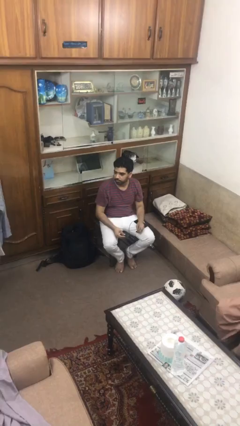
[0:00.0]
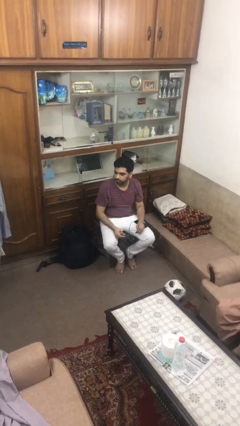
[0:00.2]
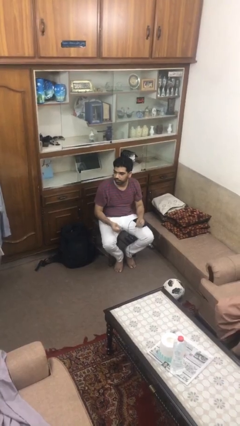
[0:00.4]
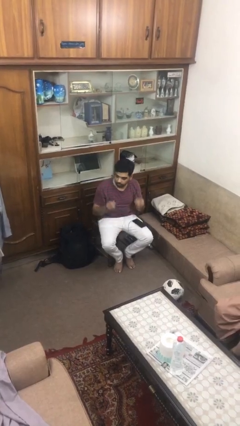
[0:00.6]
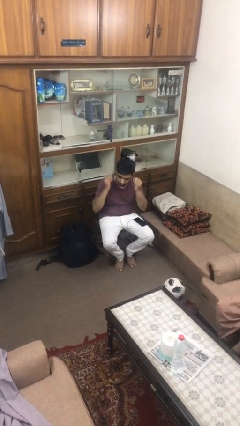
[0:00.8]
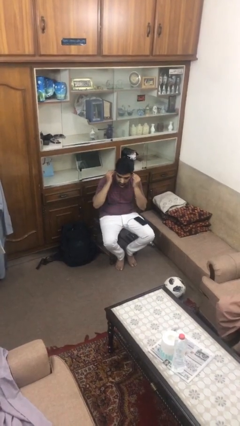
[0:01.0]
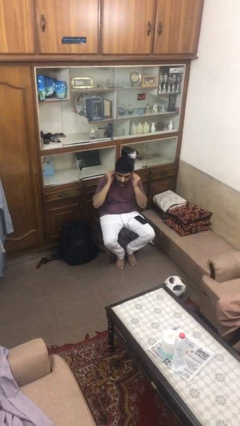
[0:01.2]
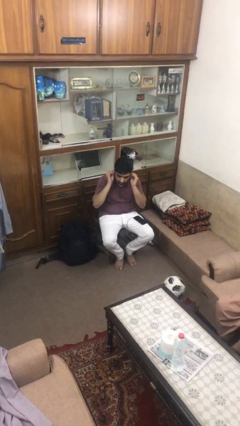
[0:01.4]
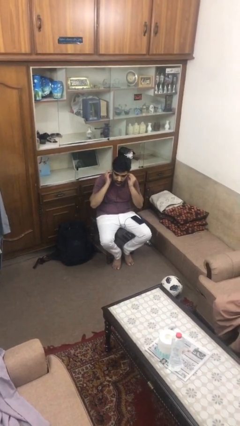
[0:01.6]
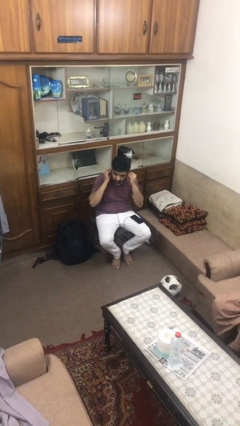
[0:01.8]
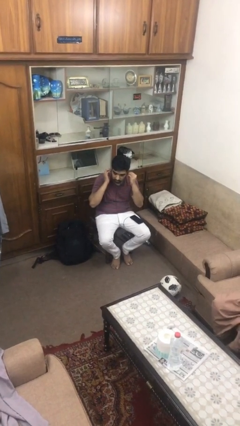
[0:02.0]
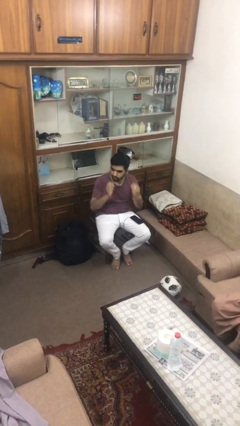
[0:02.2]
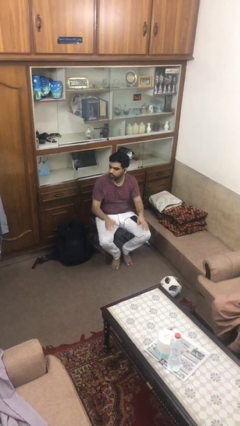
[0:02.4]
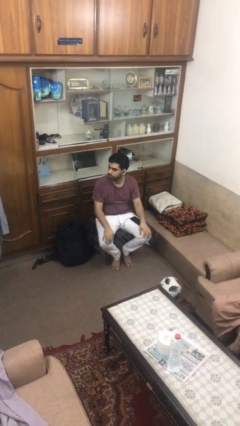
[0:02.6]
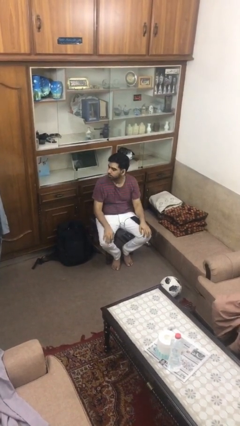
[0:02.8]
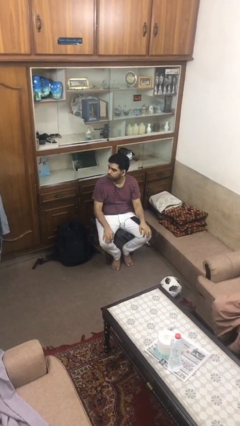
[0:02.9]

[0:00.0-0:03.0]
person puts on headphones

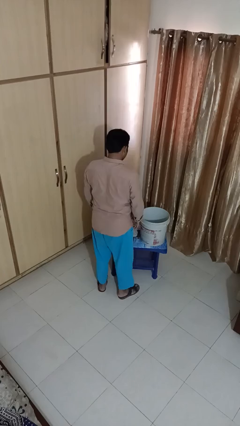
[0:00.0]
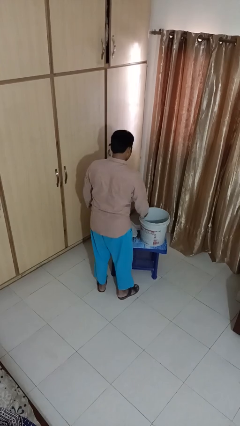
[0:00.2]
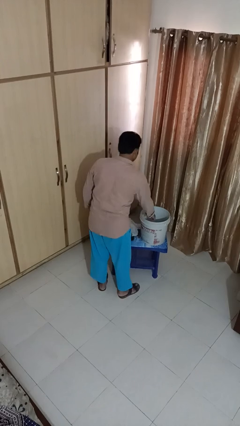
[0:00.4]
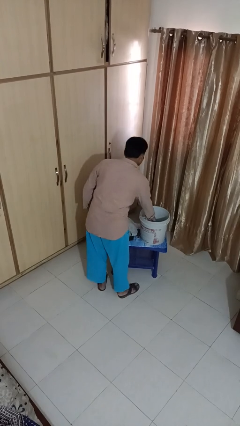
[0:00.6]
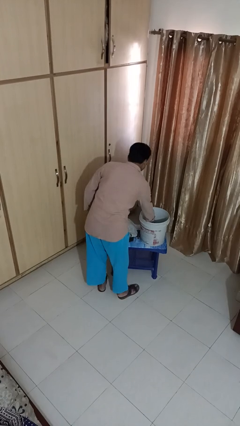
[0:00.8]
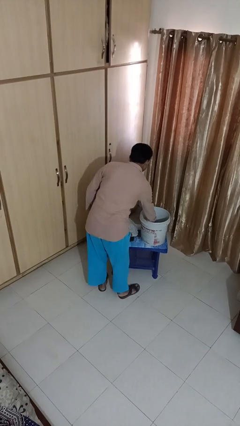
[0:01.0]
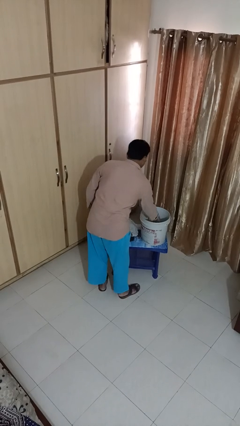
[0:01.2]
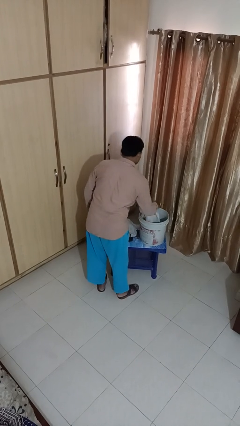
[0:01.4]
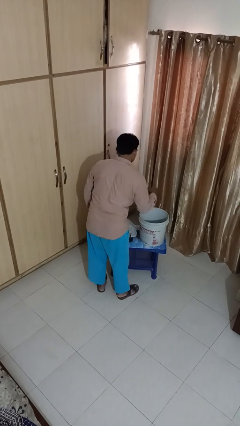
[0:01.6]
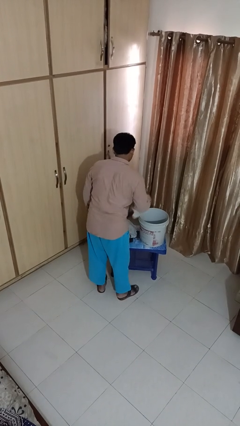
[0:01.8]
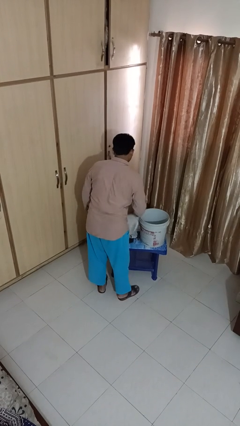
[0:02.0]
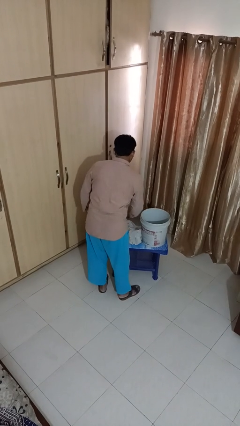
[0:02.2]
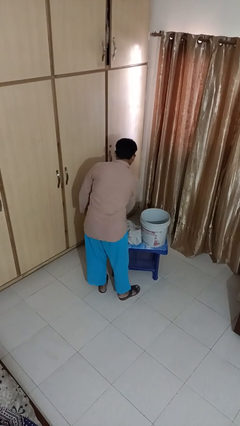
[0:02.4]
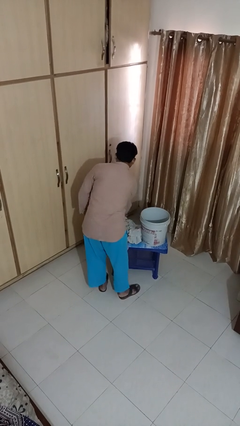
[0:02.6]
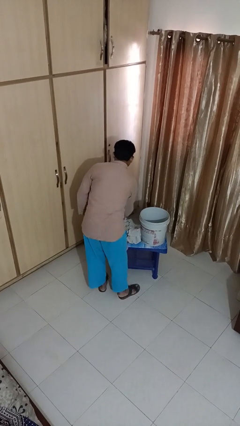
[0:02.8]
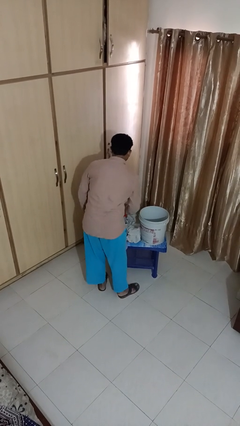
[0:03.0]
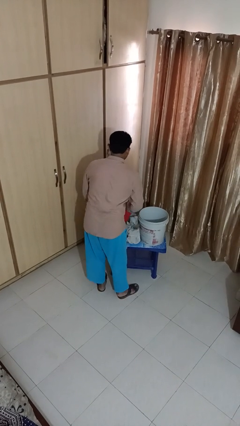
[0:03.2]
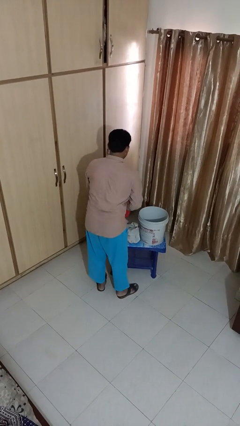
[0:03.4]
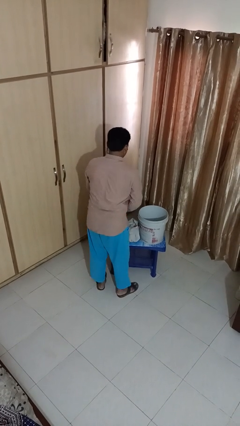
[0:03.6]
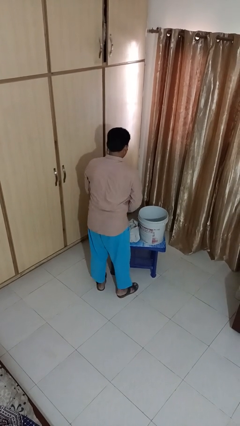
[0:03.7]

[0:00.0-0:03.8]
person takes object from basket

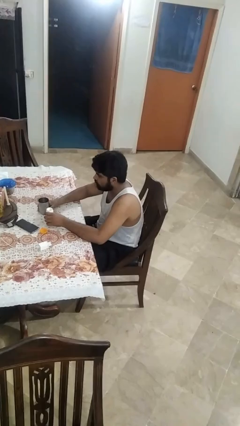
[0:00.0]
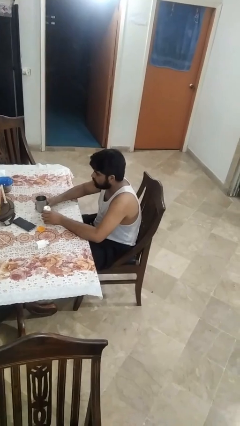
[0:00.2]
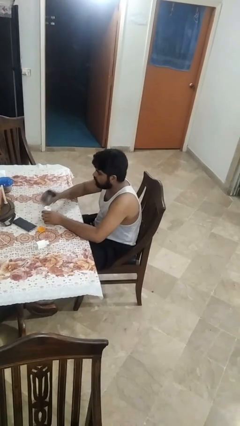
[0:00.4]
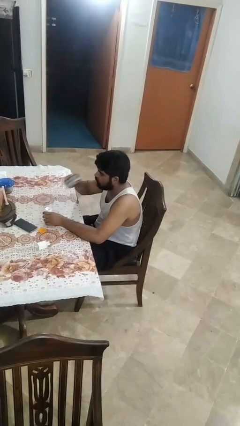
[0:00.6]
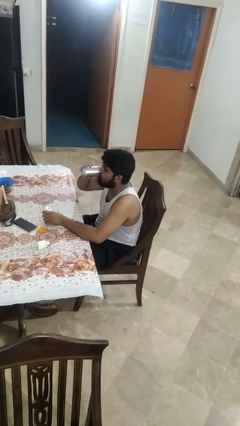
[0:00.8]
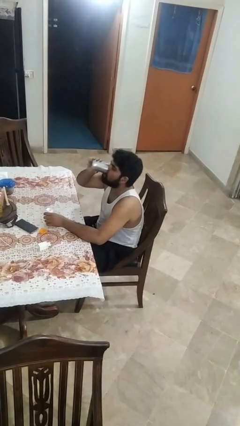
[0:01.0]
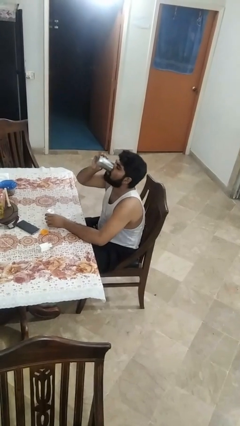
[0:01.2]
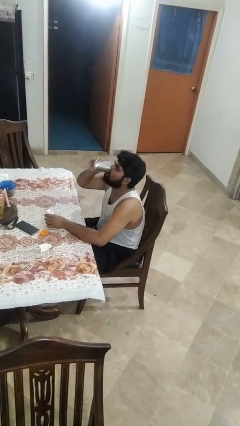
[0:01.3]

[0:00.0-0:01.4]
person drinks from cup

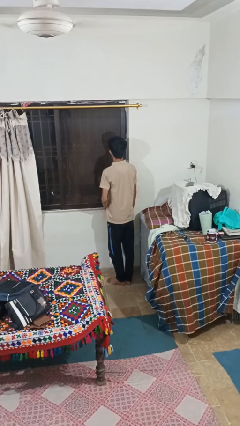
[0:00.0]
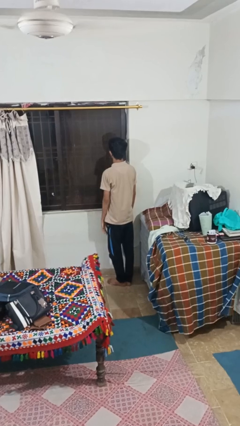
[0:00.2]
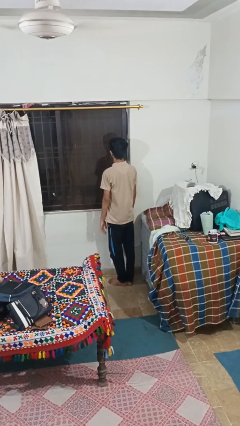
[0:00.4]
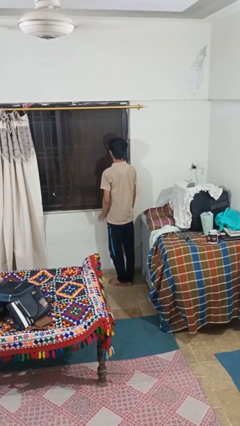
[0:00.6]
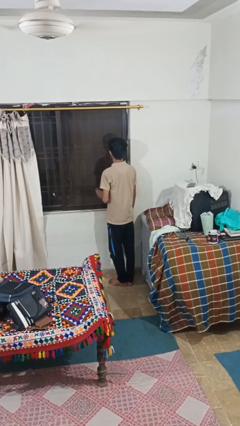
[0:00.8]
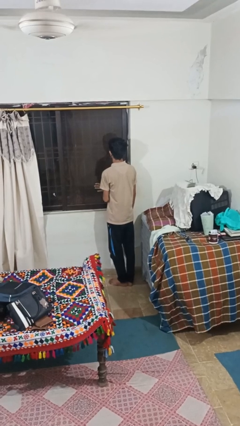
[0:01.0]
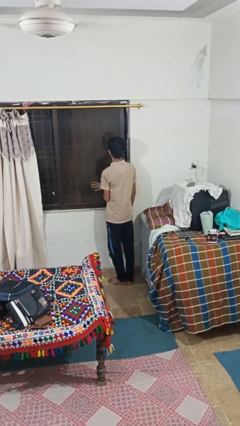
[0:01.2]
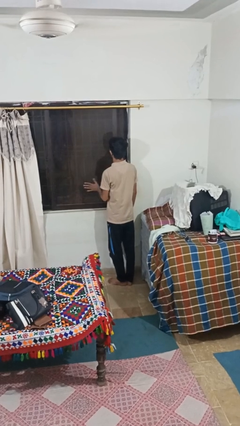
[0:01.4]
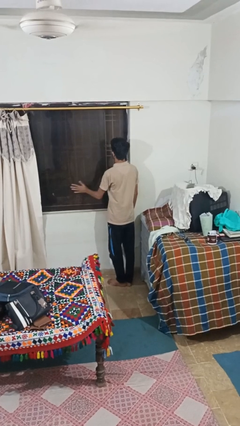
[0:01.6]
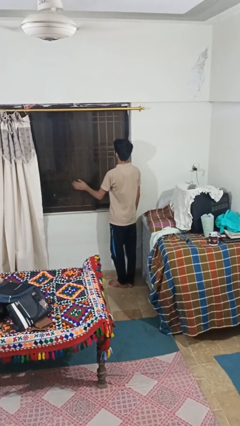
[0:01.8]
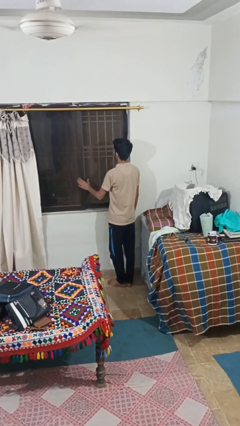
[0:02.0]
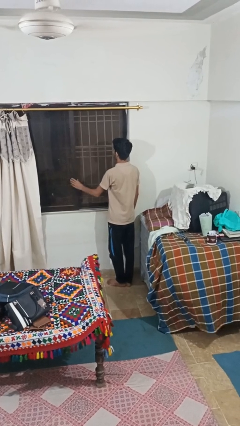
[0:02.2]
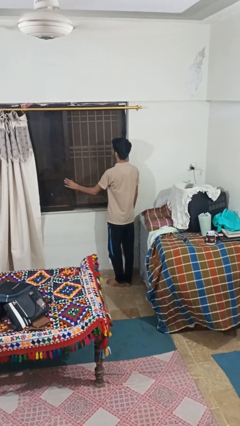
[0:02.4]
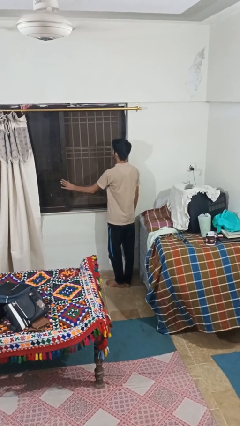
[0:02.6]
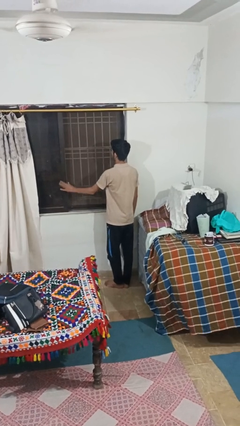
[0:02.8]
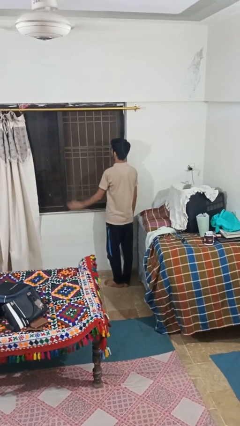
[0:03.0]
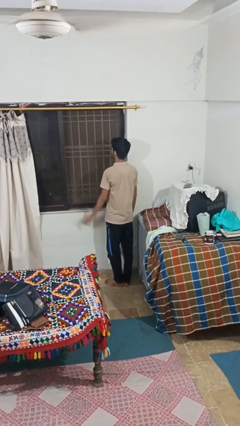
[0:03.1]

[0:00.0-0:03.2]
person opens sliding door

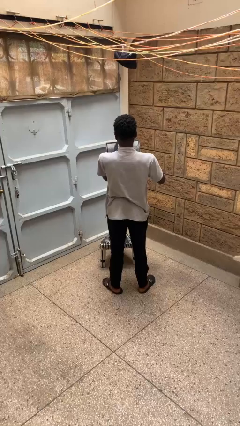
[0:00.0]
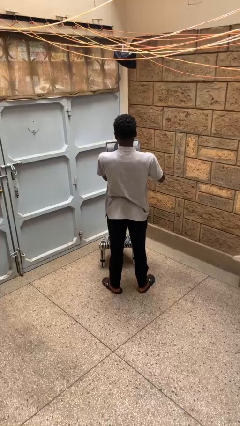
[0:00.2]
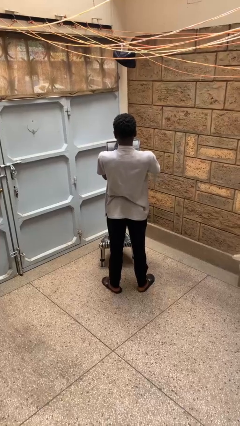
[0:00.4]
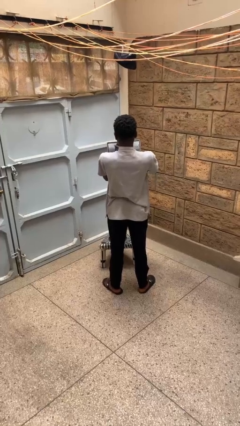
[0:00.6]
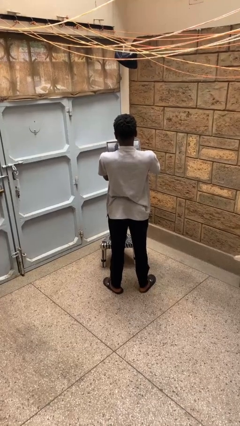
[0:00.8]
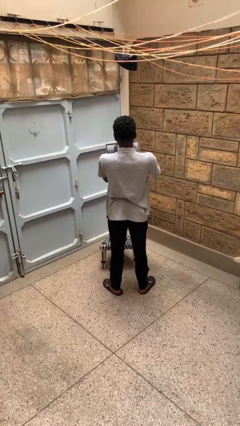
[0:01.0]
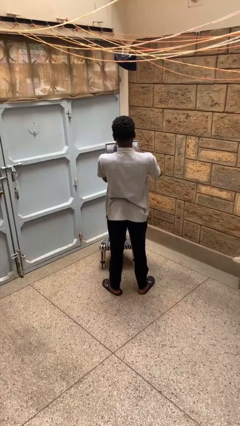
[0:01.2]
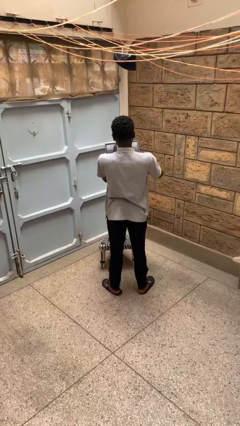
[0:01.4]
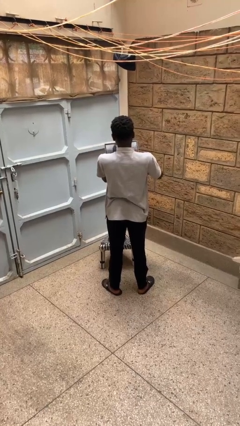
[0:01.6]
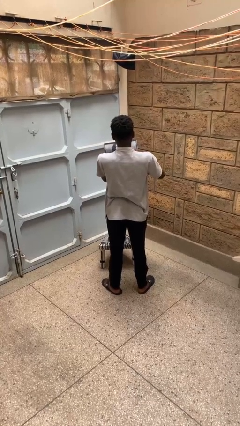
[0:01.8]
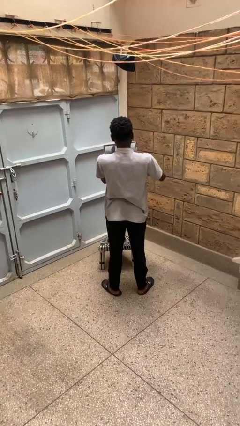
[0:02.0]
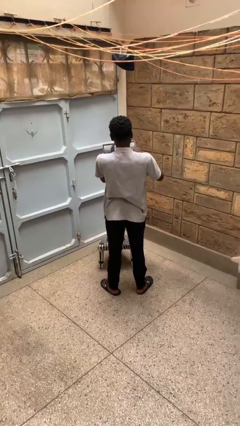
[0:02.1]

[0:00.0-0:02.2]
person interacts with tablet

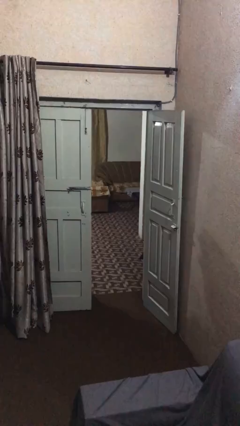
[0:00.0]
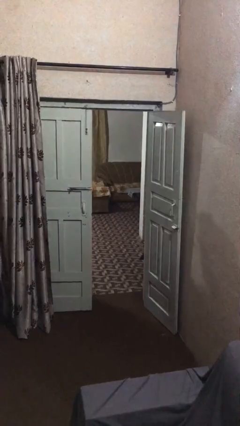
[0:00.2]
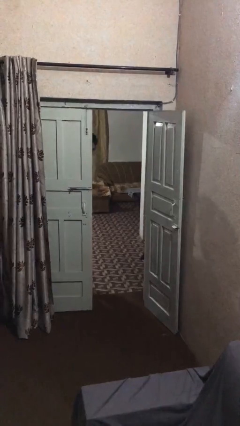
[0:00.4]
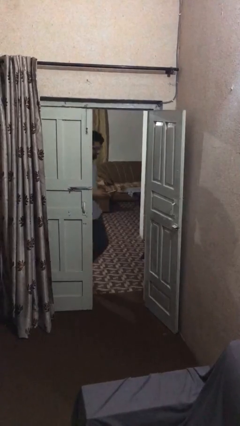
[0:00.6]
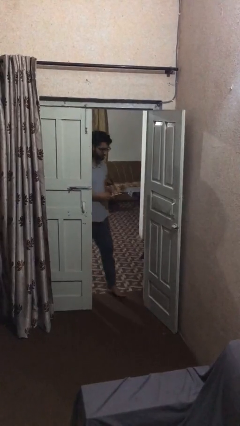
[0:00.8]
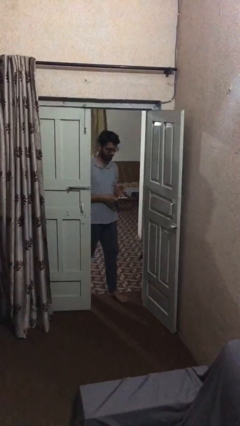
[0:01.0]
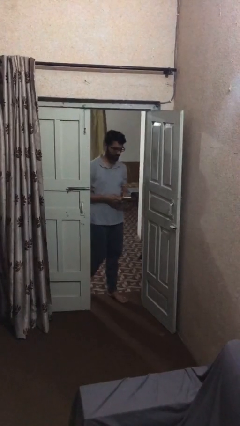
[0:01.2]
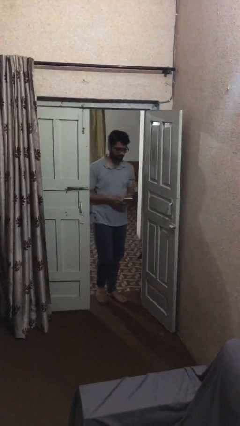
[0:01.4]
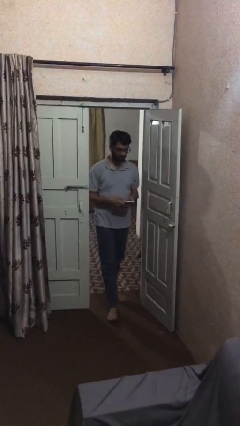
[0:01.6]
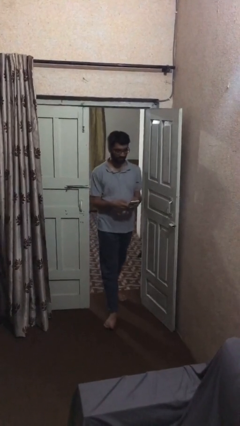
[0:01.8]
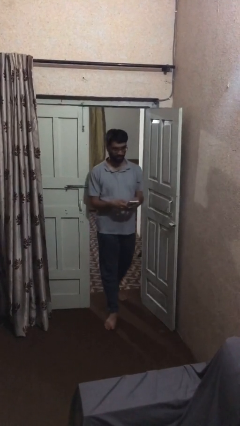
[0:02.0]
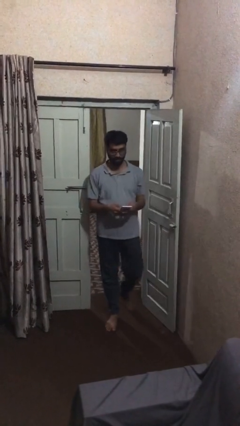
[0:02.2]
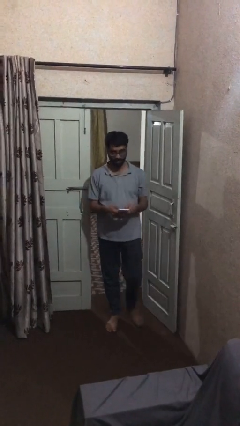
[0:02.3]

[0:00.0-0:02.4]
person enters scene through structure

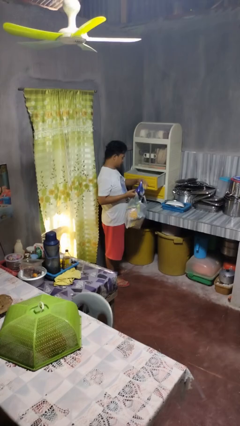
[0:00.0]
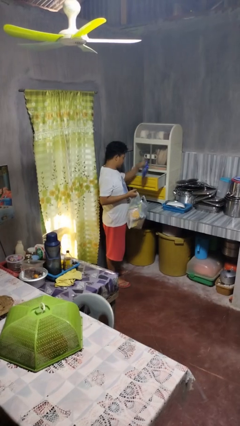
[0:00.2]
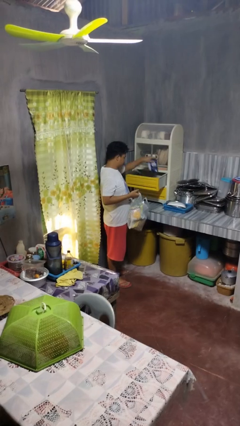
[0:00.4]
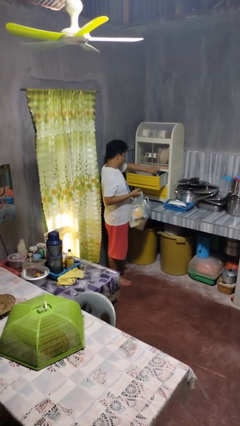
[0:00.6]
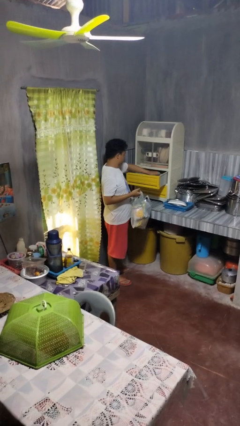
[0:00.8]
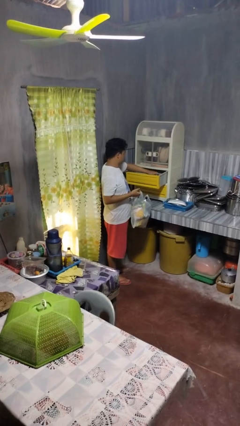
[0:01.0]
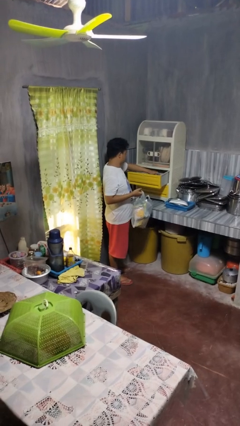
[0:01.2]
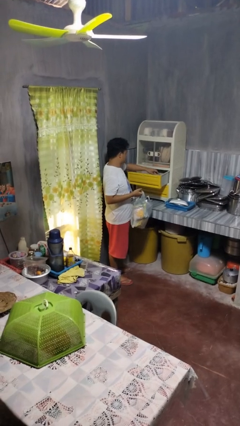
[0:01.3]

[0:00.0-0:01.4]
person loads groceries into cabinet
